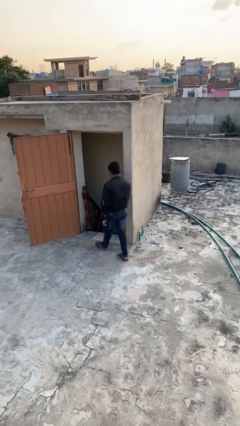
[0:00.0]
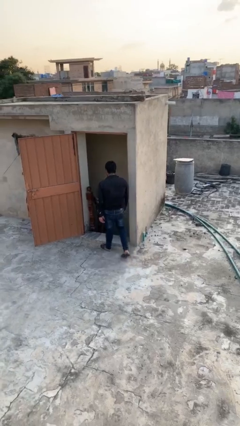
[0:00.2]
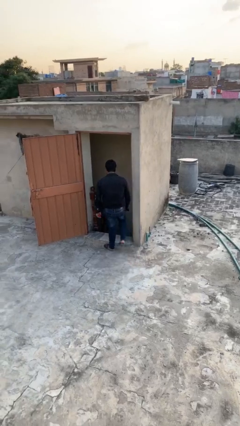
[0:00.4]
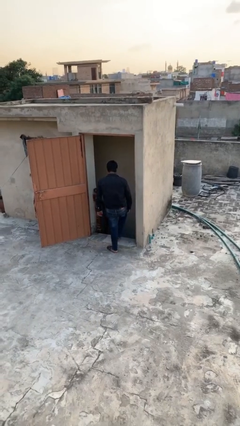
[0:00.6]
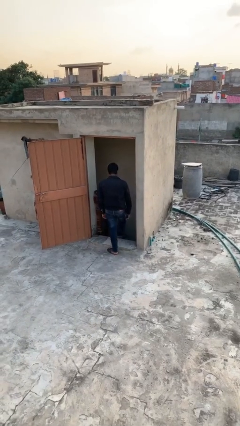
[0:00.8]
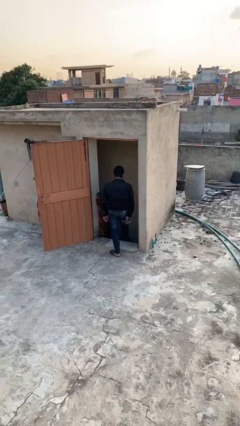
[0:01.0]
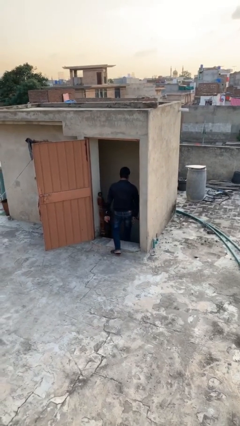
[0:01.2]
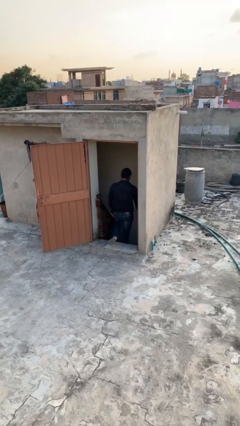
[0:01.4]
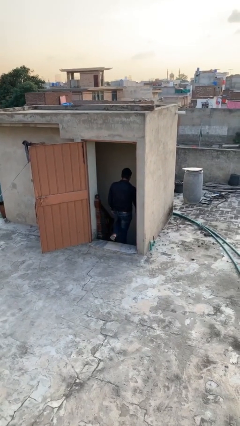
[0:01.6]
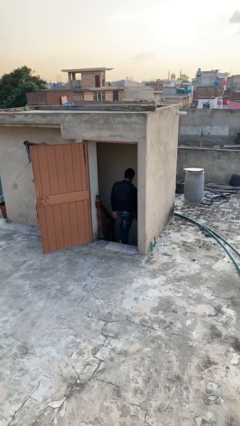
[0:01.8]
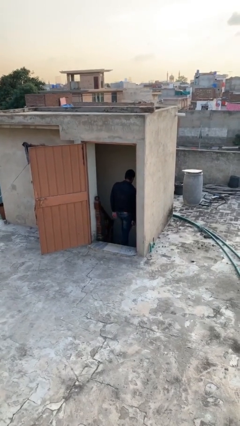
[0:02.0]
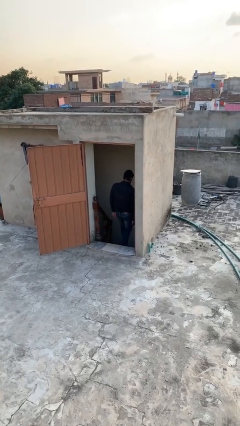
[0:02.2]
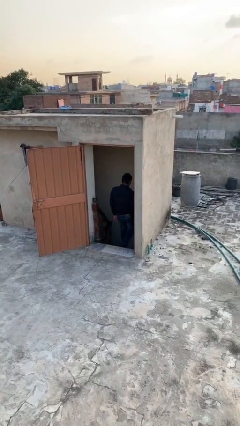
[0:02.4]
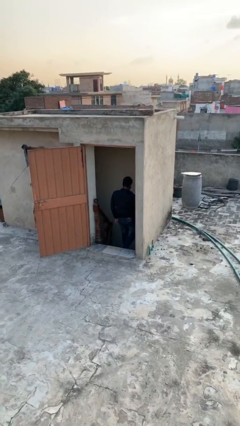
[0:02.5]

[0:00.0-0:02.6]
person exits scene through structure

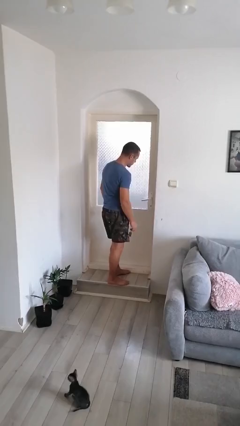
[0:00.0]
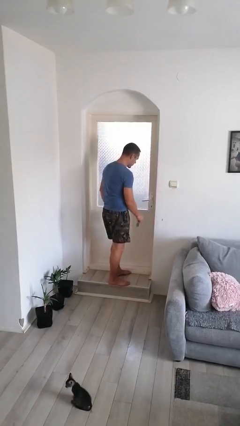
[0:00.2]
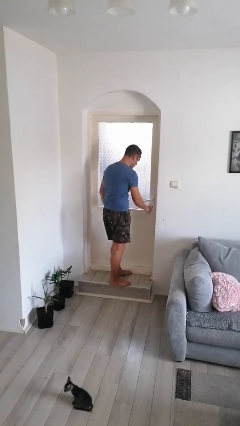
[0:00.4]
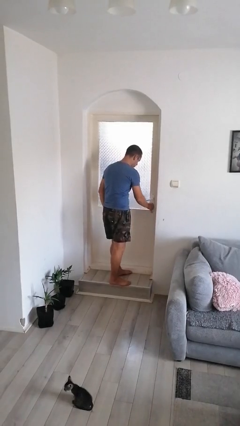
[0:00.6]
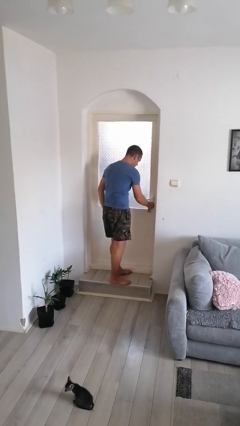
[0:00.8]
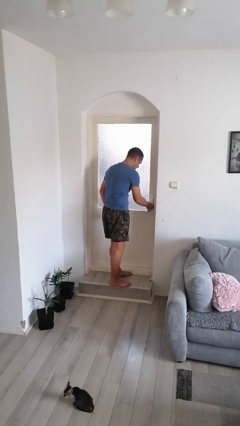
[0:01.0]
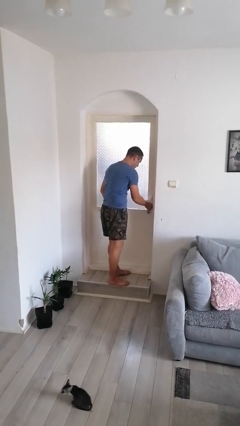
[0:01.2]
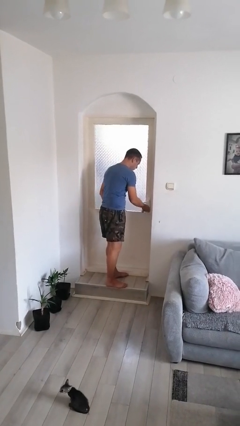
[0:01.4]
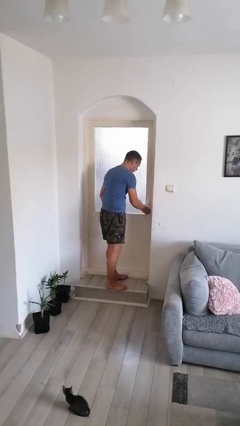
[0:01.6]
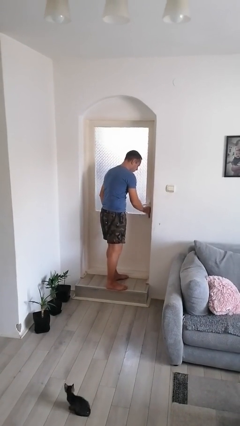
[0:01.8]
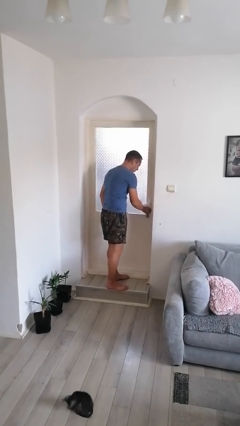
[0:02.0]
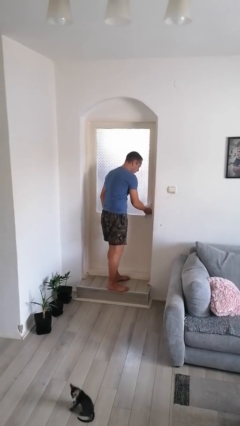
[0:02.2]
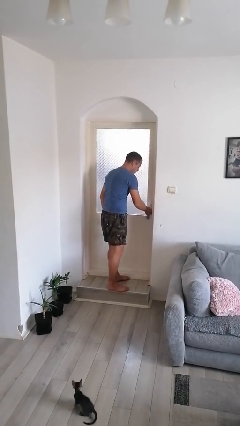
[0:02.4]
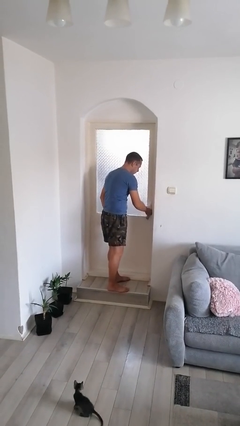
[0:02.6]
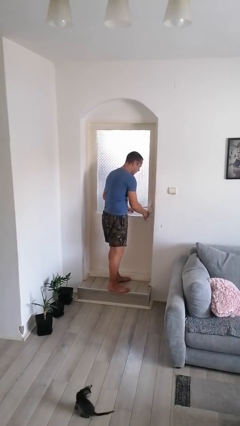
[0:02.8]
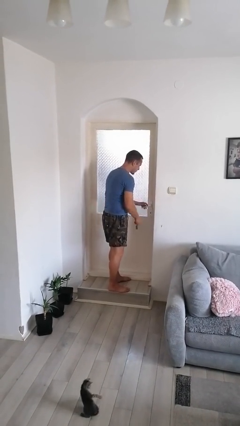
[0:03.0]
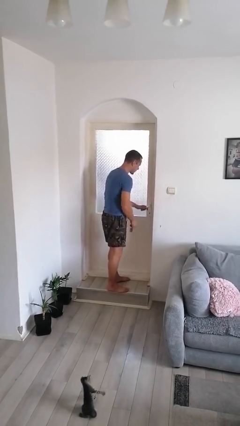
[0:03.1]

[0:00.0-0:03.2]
person unlocks door with keys

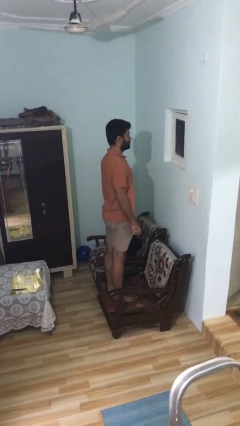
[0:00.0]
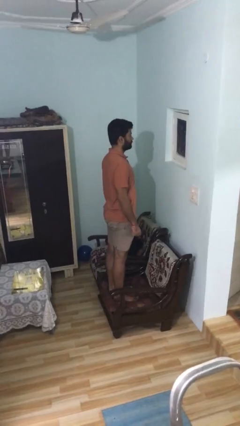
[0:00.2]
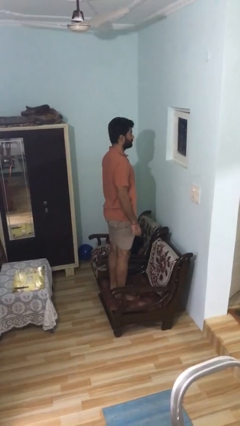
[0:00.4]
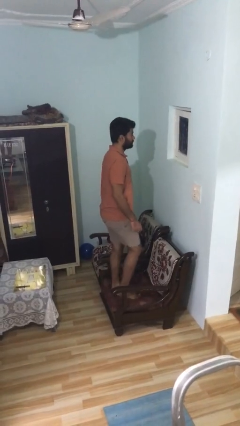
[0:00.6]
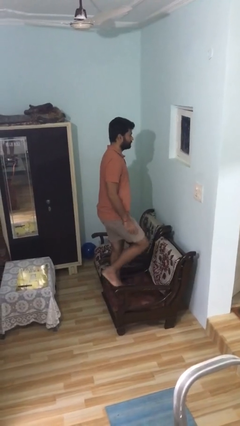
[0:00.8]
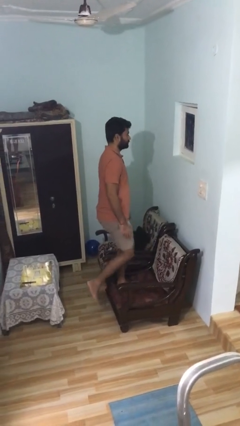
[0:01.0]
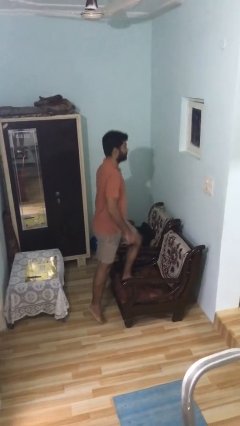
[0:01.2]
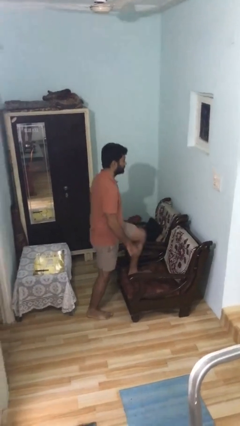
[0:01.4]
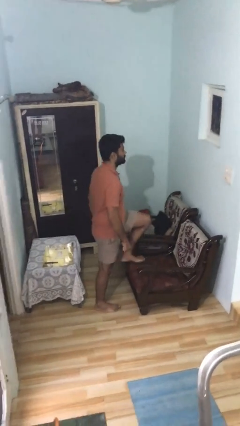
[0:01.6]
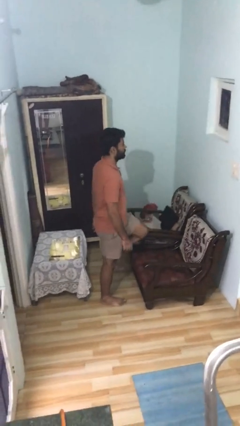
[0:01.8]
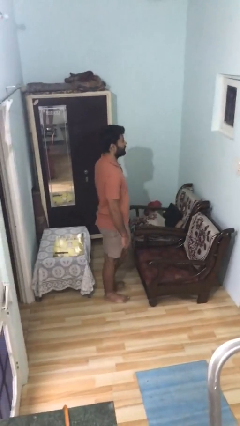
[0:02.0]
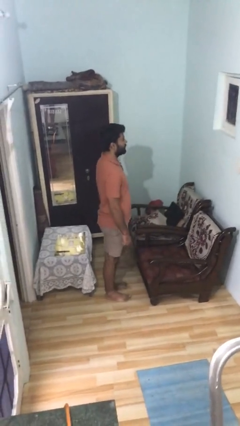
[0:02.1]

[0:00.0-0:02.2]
person climbs off couch

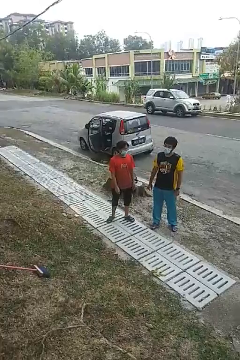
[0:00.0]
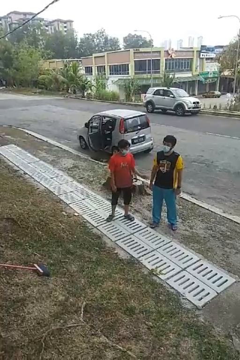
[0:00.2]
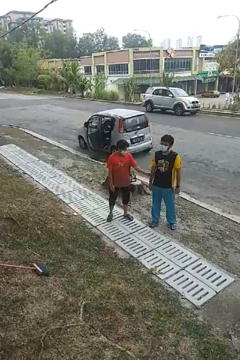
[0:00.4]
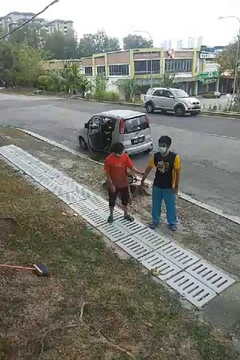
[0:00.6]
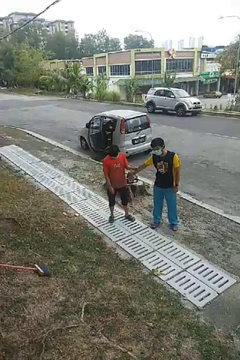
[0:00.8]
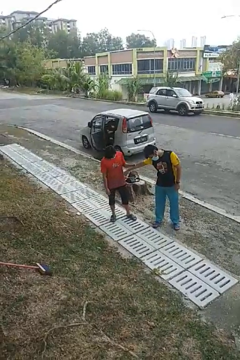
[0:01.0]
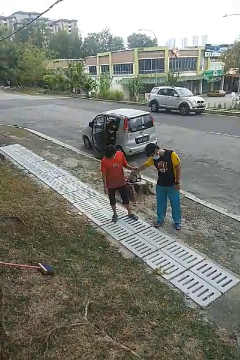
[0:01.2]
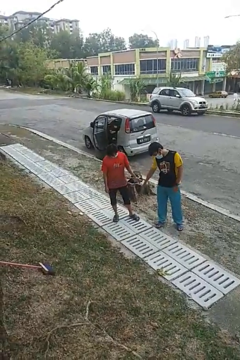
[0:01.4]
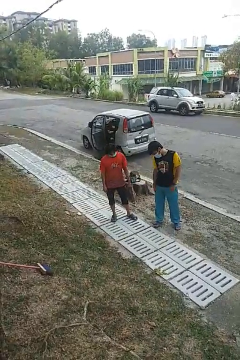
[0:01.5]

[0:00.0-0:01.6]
person grabs person by forearm

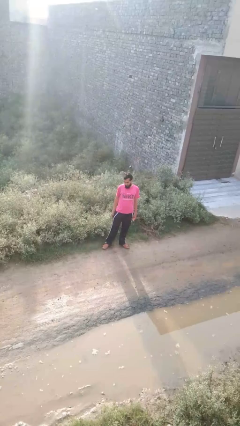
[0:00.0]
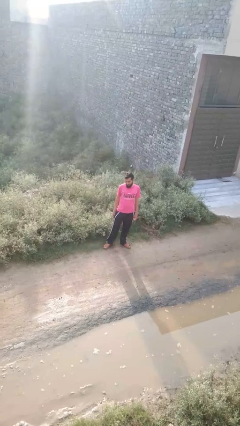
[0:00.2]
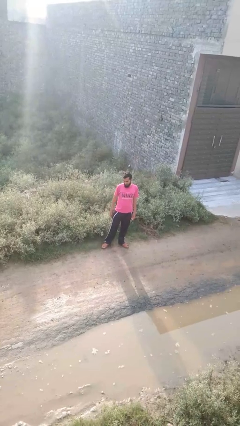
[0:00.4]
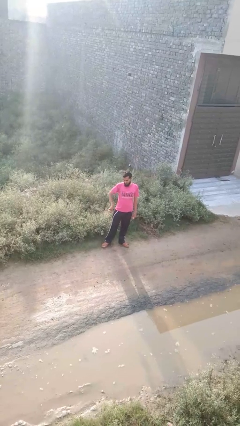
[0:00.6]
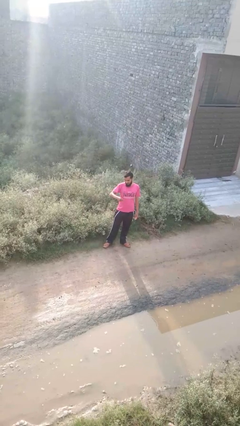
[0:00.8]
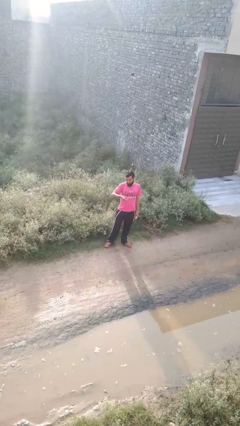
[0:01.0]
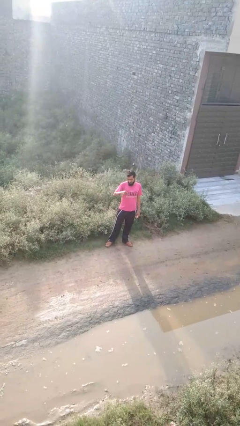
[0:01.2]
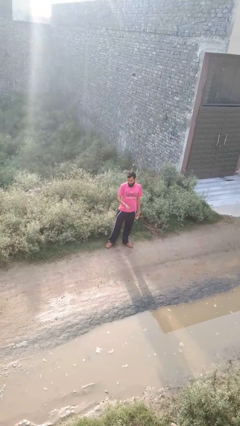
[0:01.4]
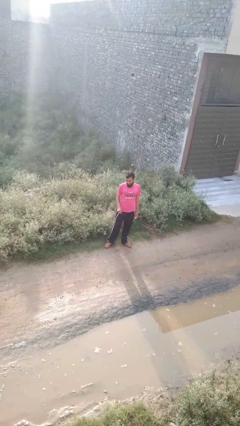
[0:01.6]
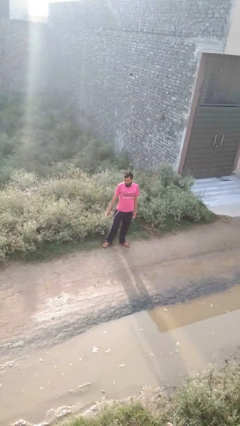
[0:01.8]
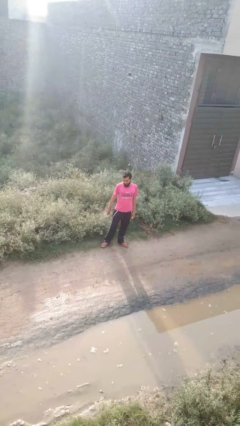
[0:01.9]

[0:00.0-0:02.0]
person snaps fingers

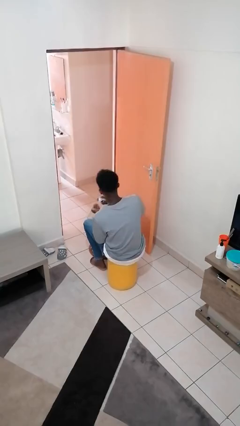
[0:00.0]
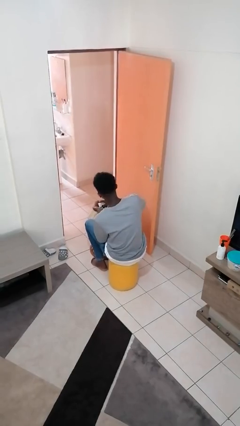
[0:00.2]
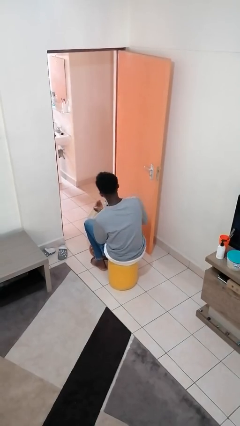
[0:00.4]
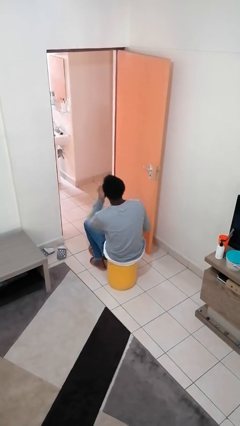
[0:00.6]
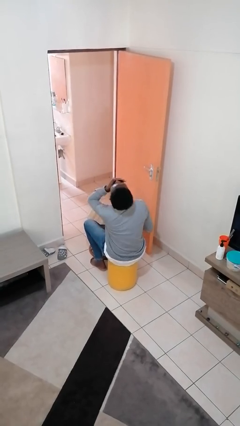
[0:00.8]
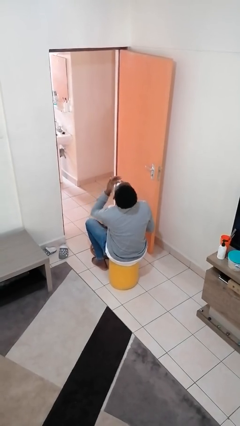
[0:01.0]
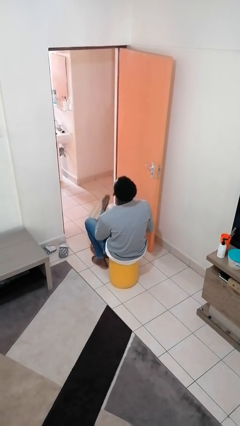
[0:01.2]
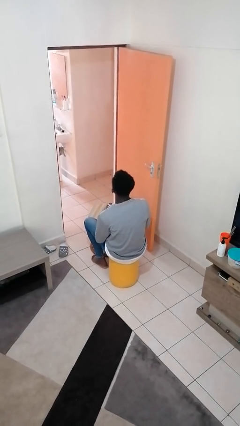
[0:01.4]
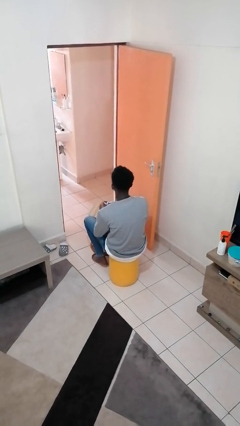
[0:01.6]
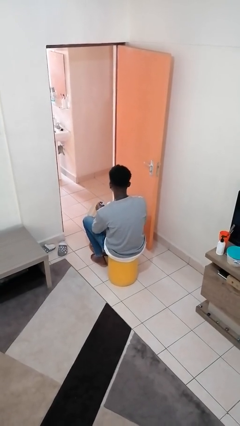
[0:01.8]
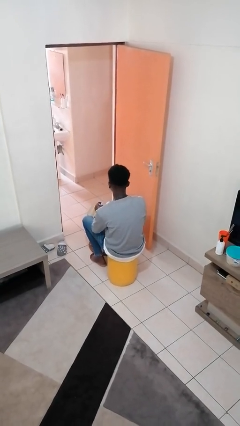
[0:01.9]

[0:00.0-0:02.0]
person takes medicine pills

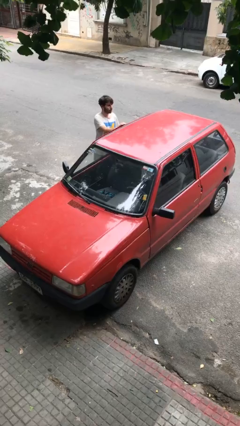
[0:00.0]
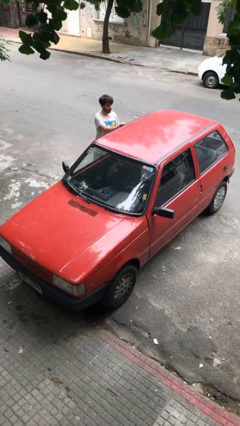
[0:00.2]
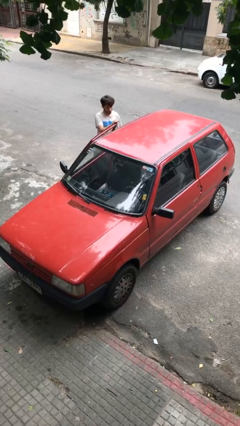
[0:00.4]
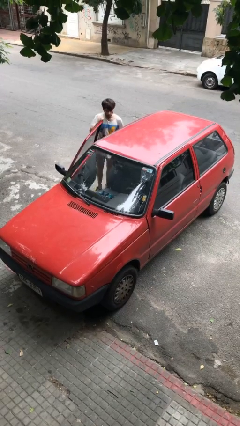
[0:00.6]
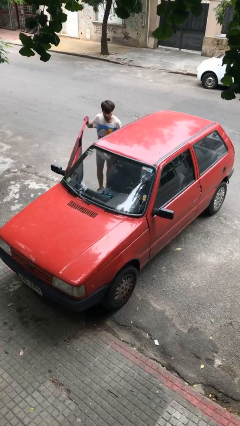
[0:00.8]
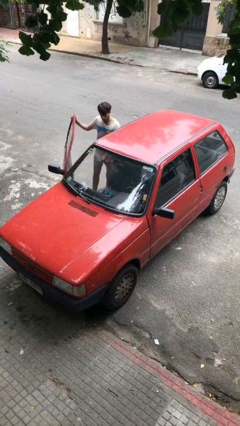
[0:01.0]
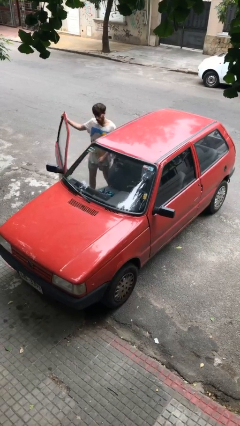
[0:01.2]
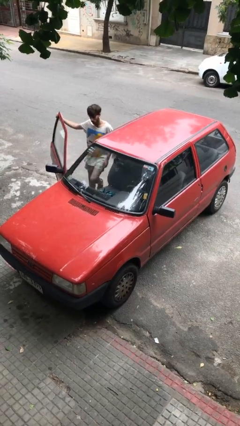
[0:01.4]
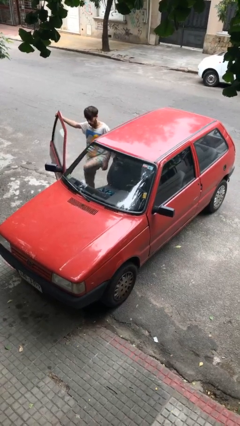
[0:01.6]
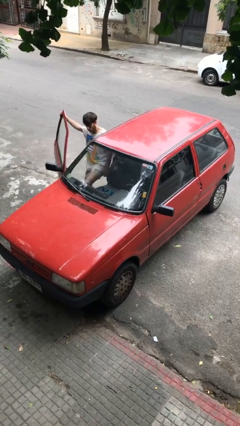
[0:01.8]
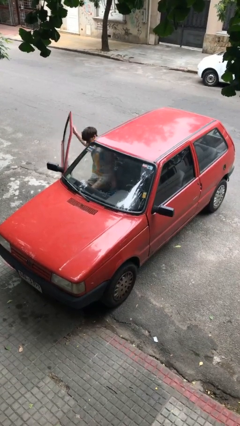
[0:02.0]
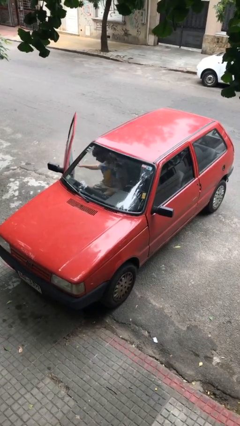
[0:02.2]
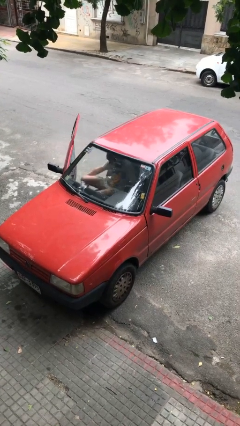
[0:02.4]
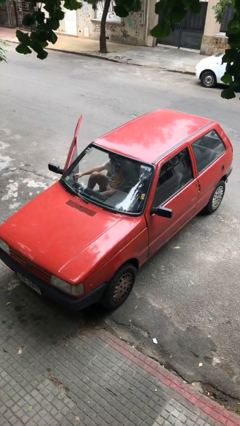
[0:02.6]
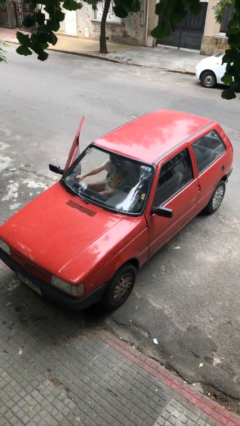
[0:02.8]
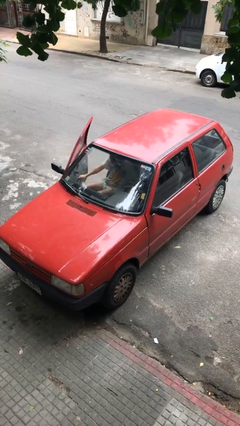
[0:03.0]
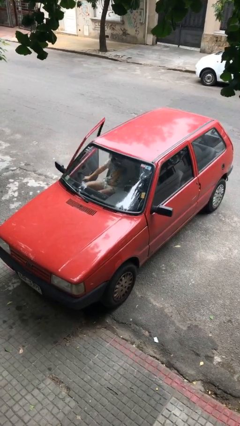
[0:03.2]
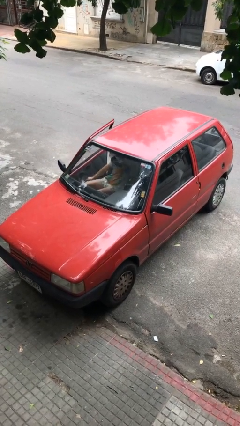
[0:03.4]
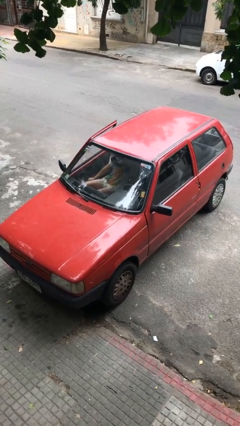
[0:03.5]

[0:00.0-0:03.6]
car picks up person

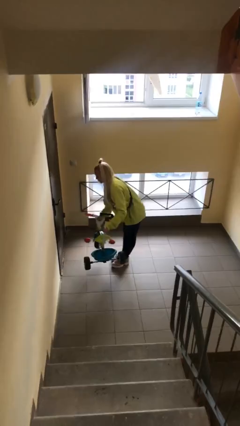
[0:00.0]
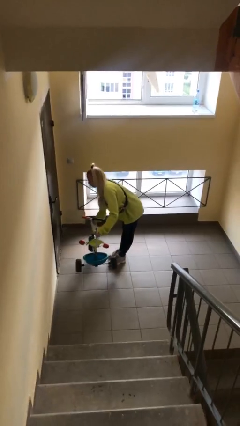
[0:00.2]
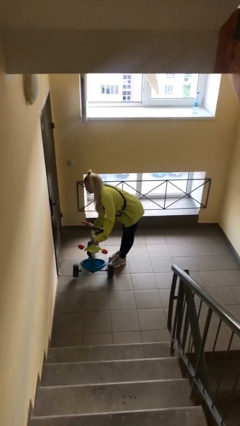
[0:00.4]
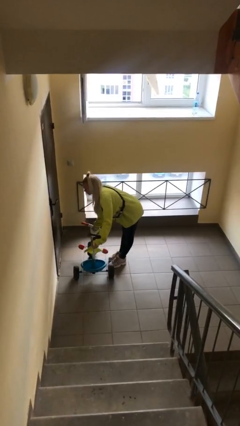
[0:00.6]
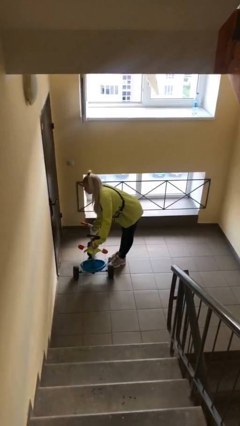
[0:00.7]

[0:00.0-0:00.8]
person puts down object on floor
